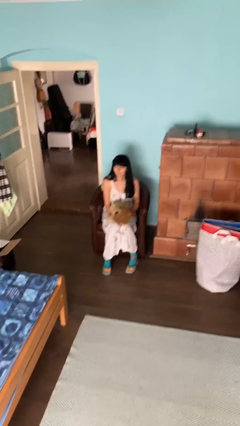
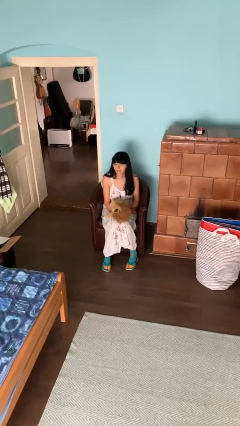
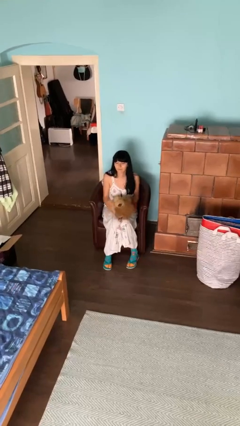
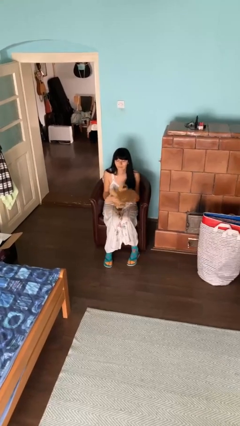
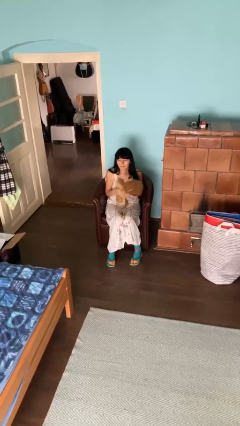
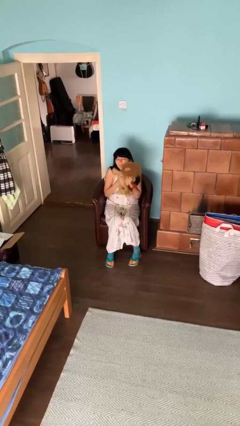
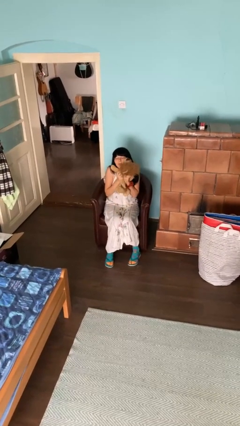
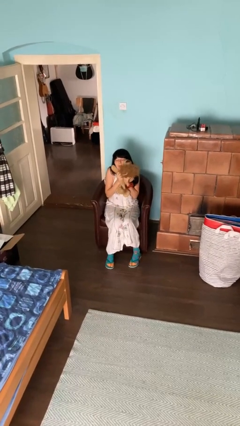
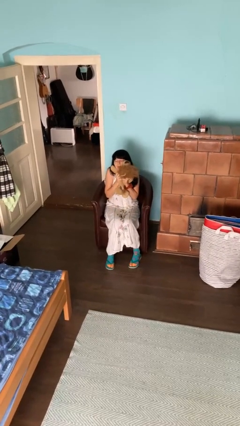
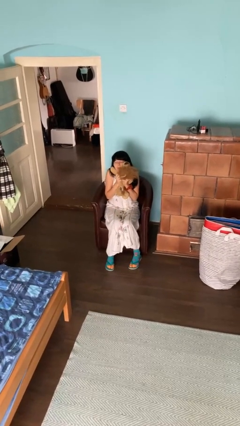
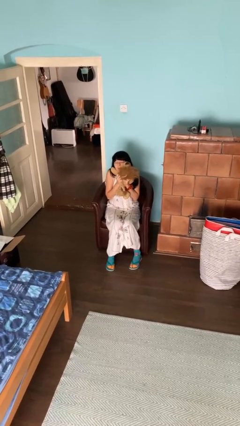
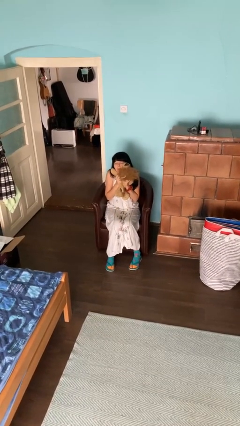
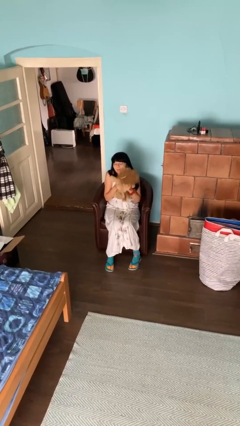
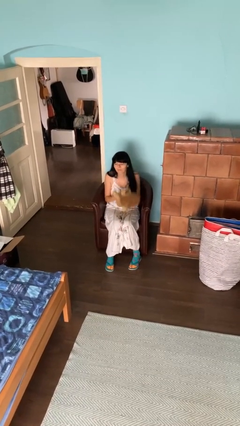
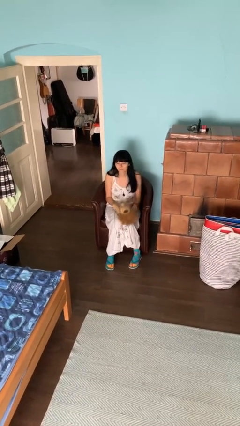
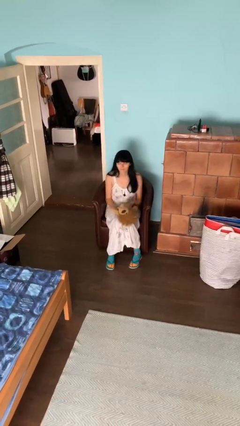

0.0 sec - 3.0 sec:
person hugs stuffed animal

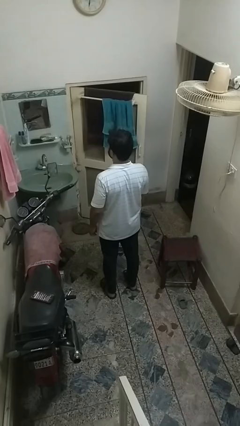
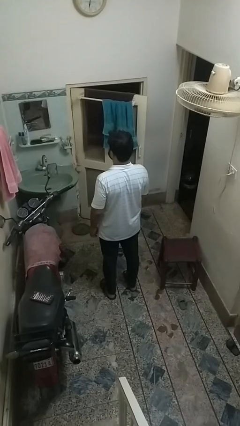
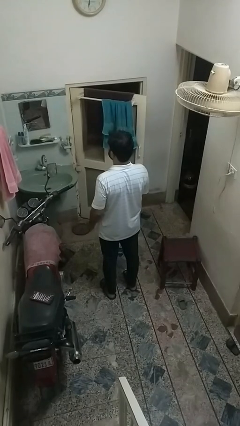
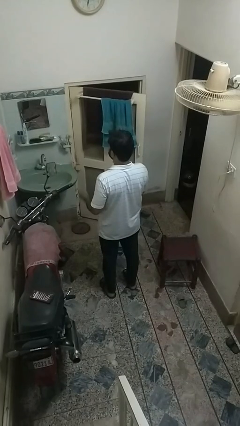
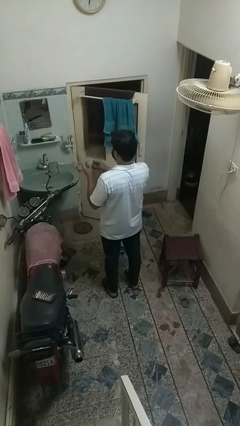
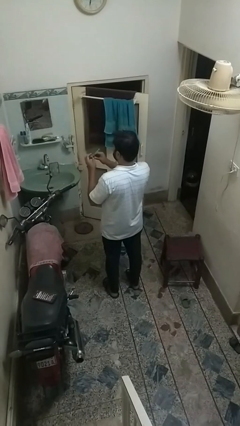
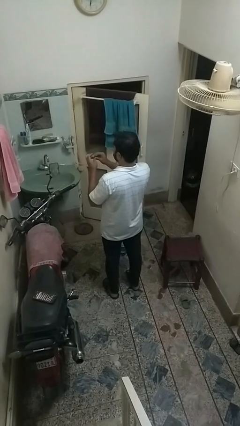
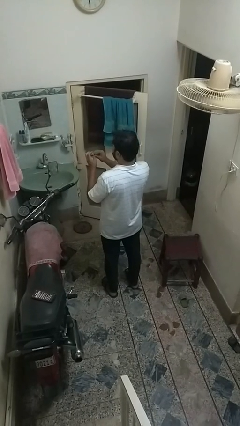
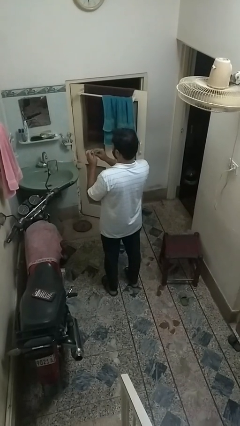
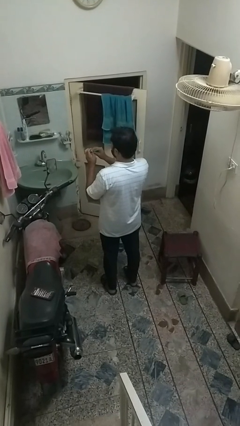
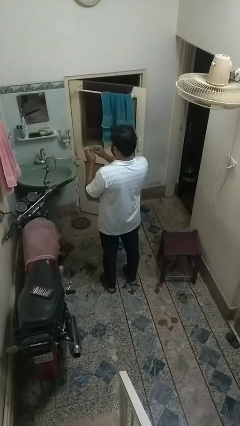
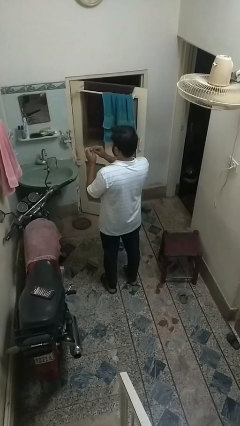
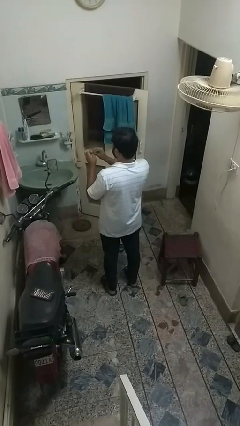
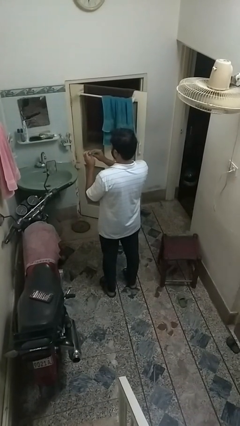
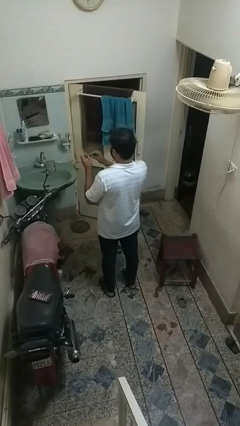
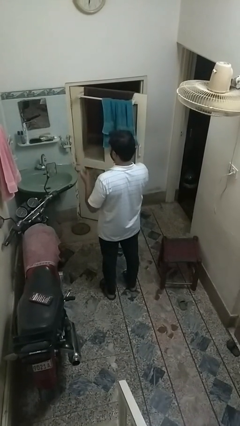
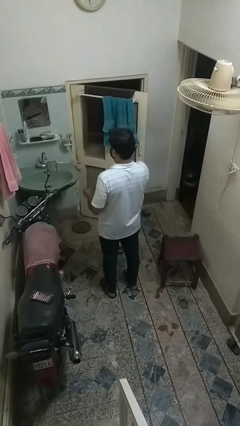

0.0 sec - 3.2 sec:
person files fingernails

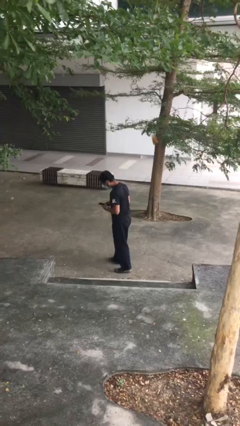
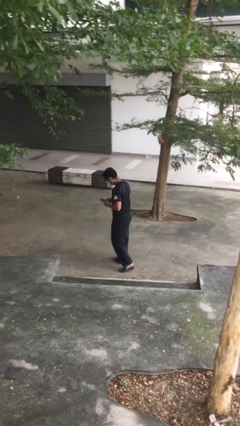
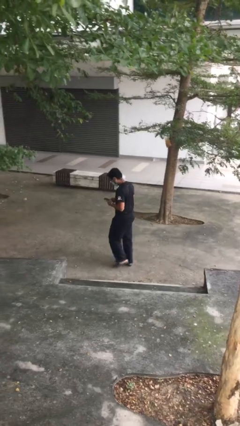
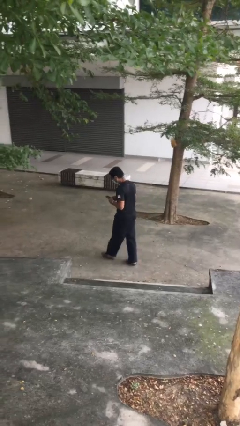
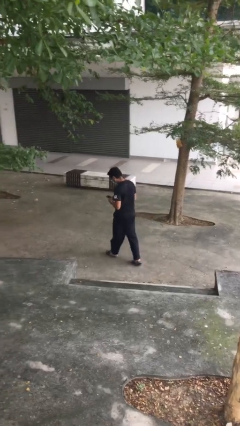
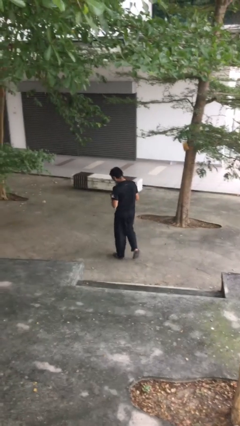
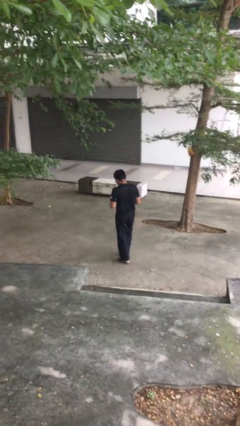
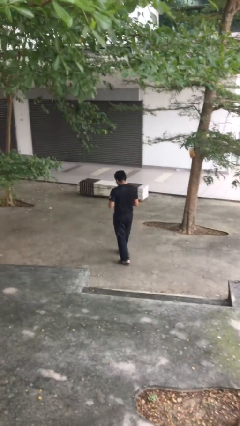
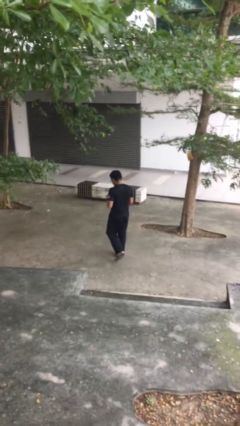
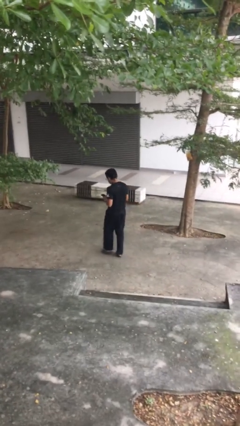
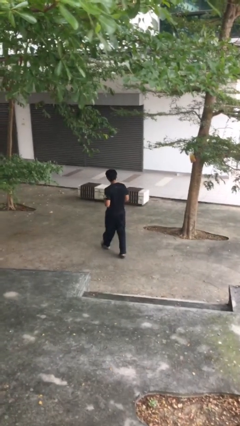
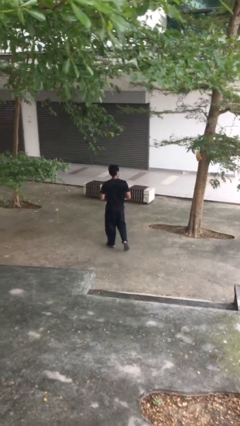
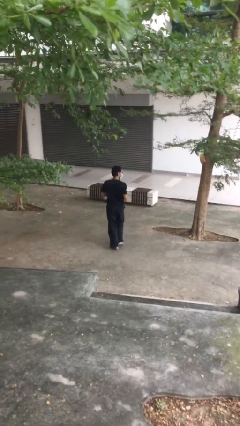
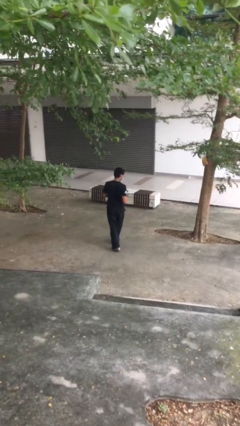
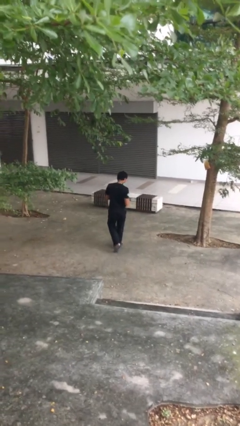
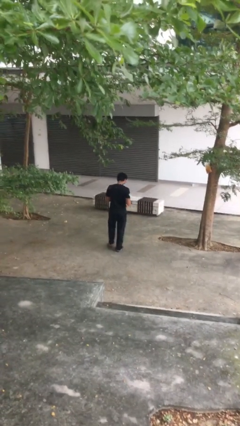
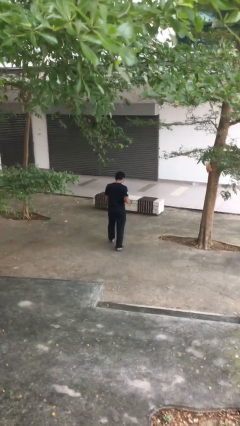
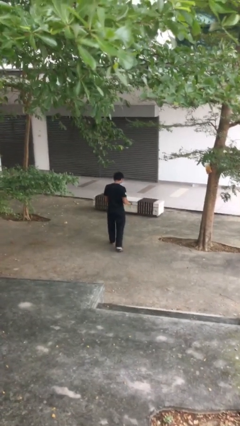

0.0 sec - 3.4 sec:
person texts on phone

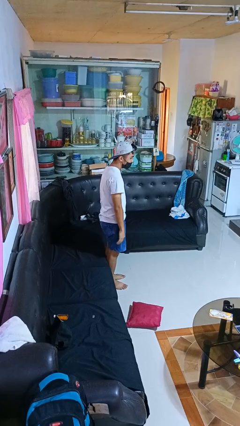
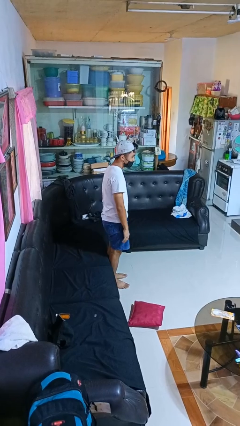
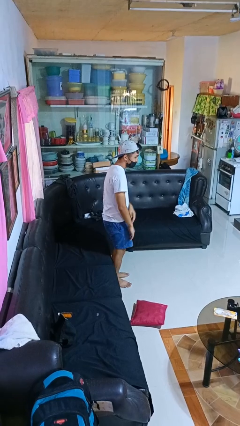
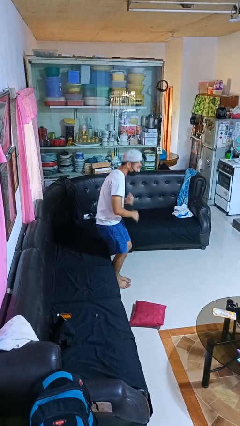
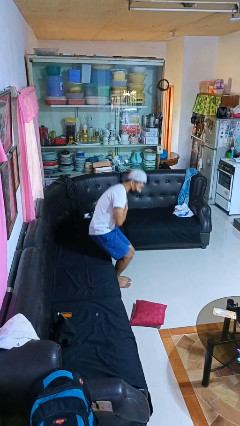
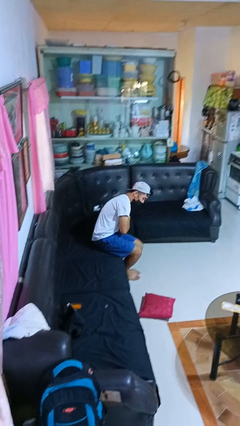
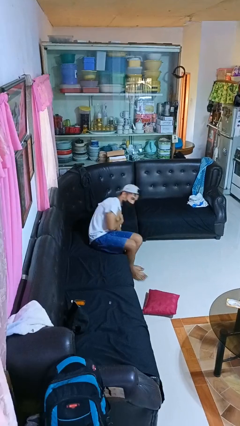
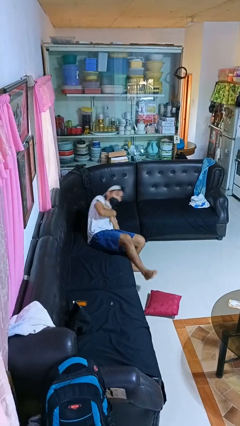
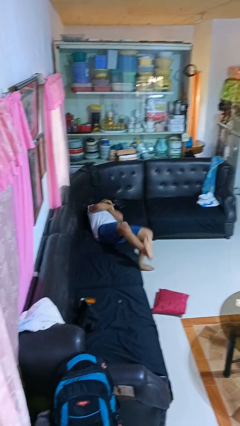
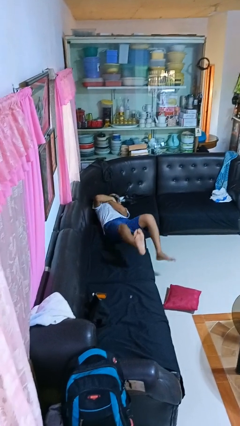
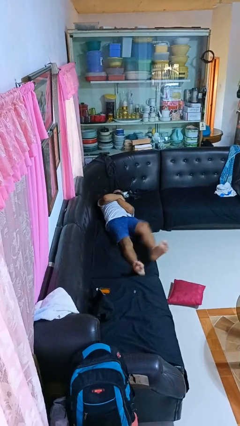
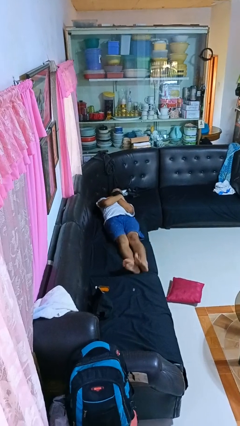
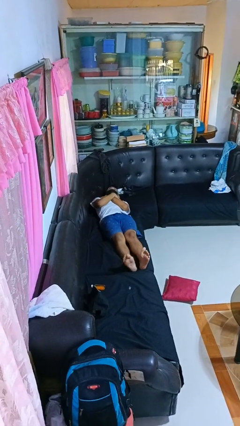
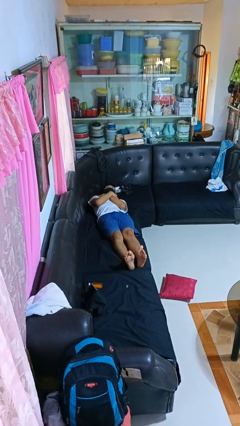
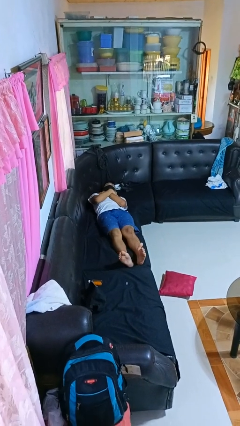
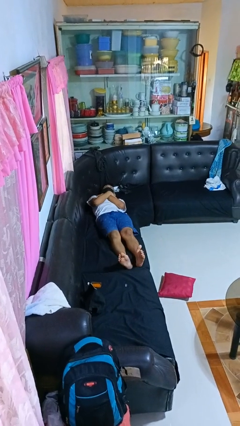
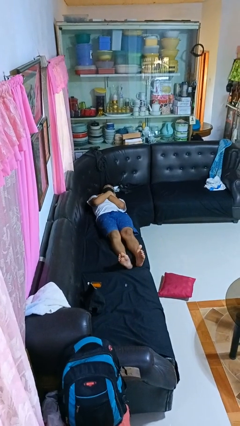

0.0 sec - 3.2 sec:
person lies down on couch

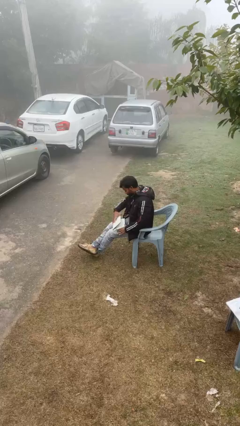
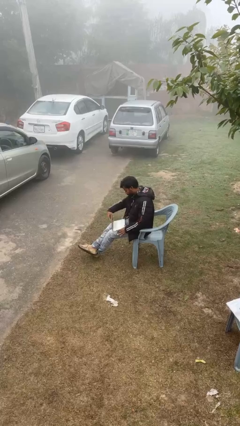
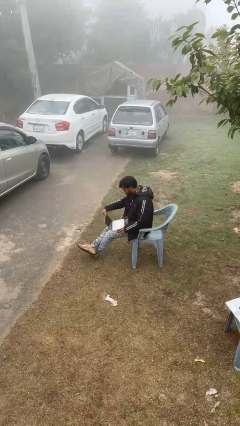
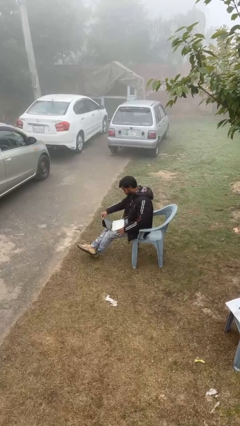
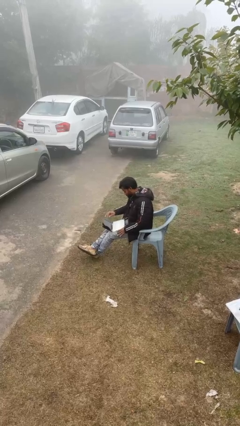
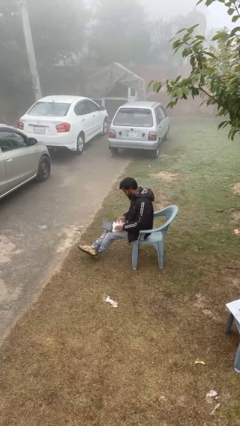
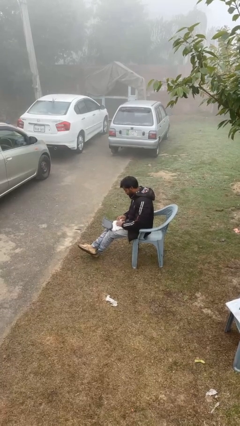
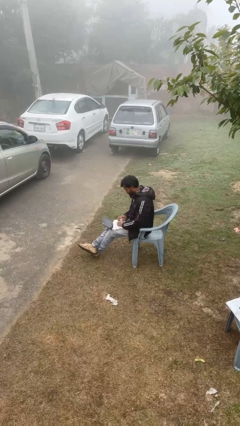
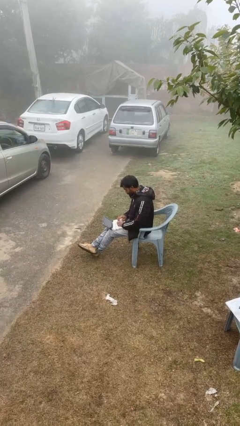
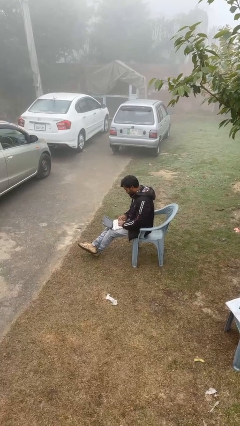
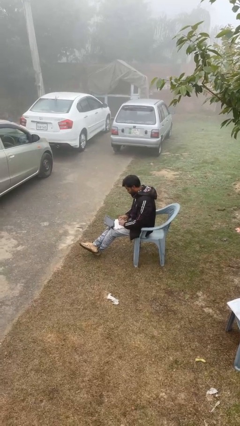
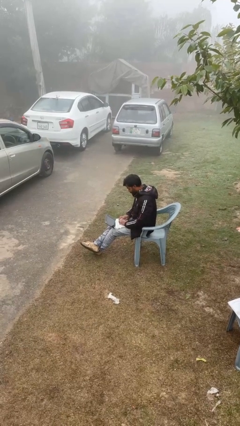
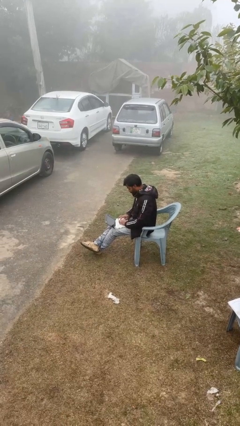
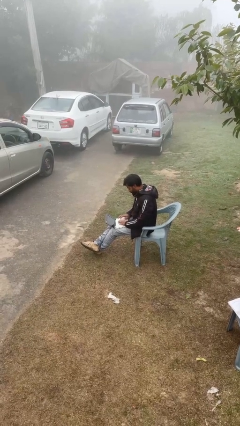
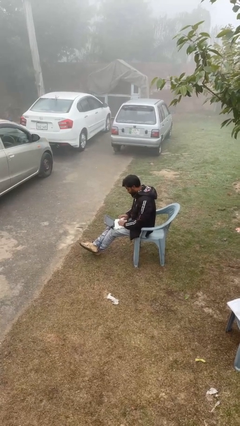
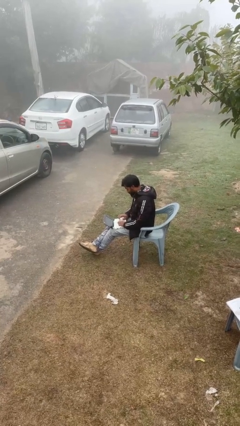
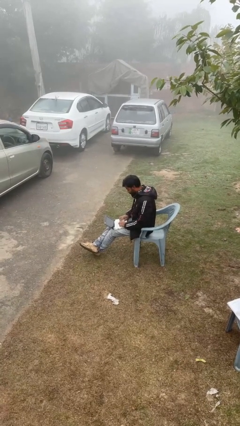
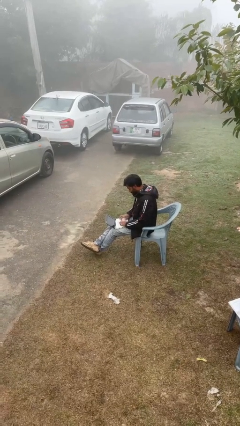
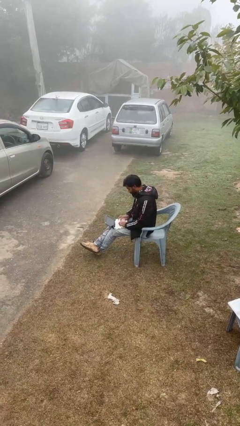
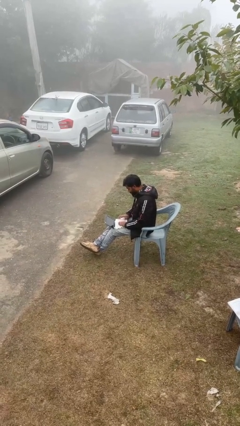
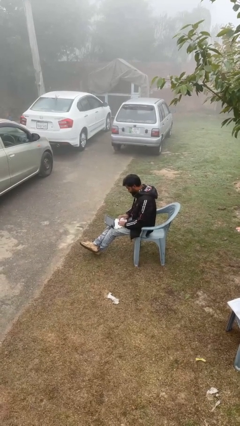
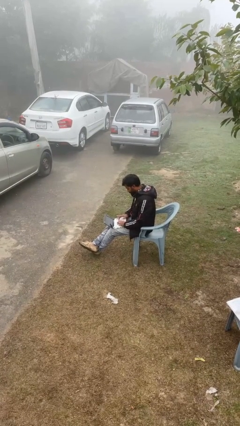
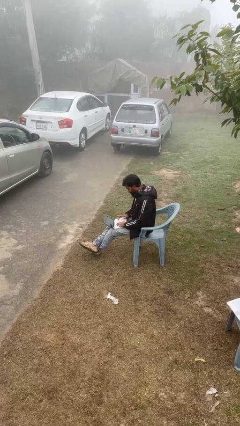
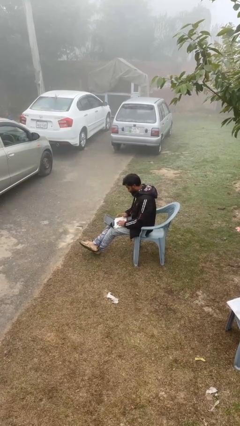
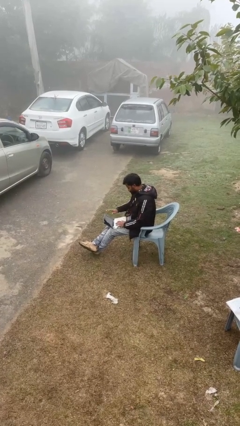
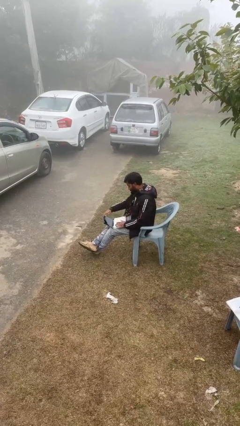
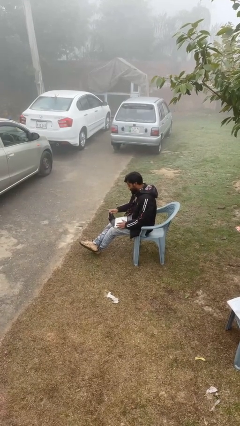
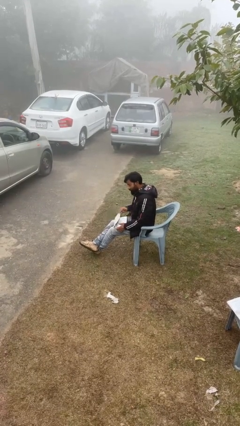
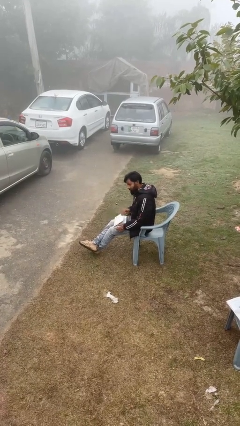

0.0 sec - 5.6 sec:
person interacts with laptop
